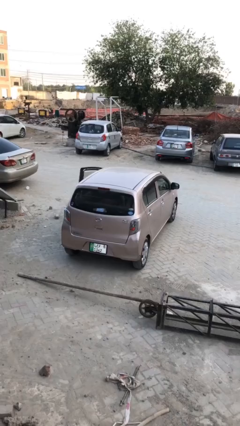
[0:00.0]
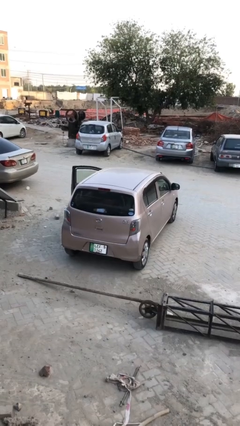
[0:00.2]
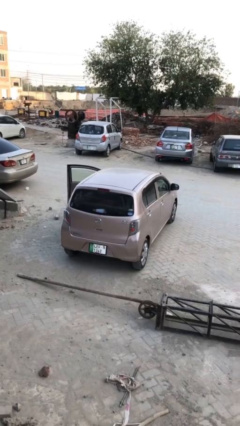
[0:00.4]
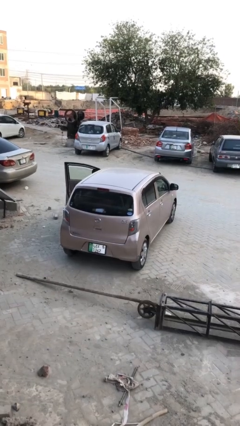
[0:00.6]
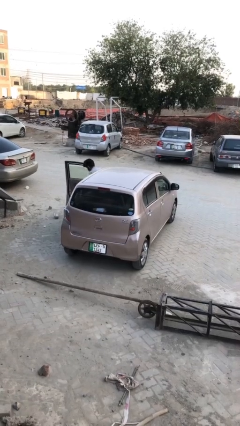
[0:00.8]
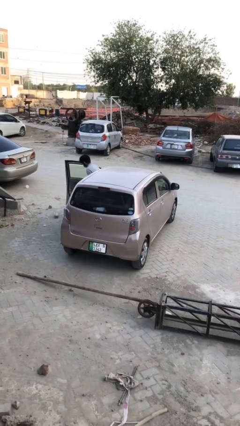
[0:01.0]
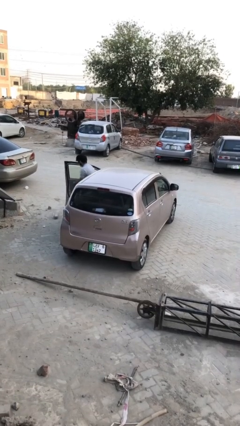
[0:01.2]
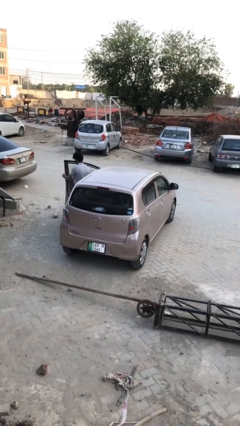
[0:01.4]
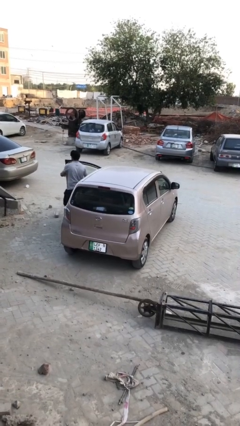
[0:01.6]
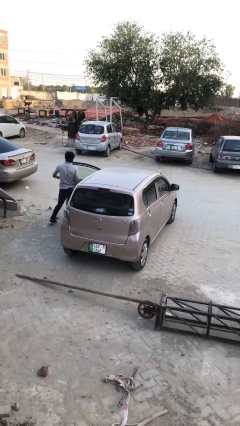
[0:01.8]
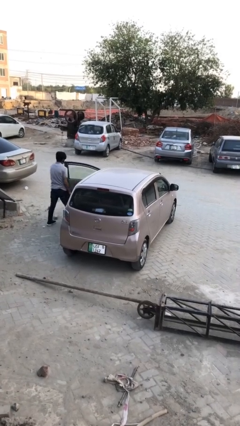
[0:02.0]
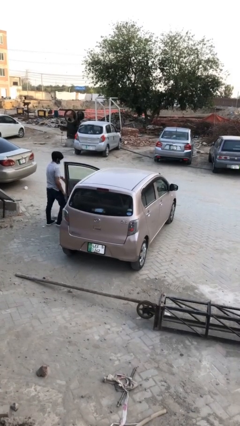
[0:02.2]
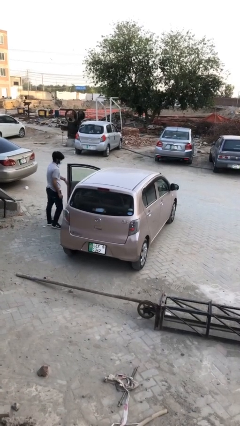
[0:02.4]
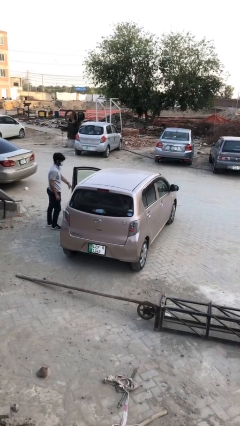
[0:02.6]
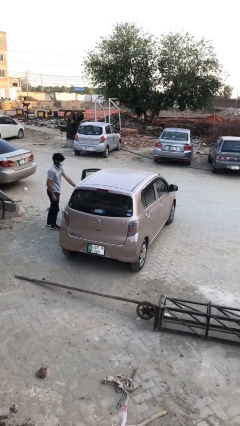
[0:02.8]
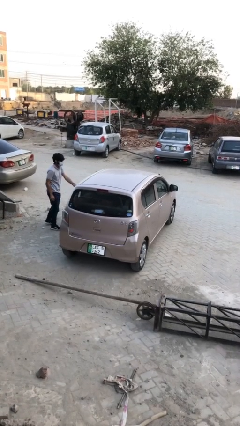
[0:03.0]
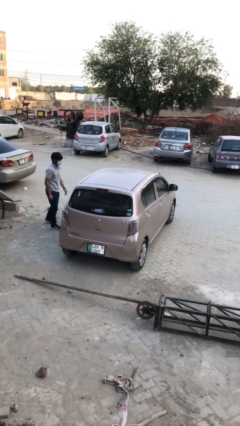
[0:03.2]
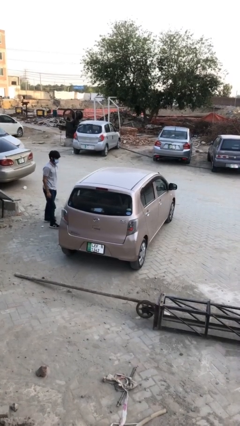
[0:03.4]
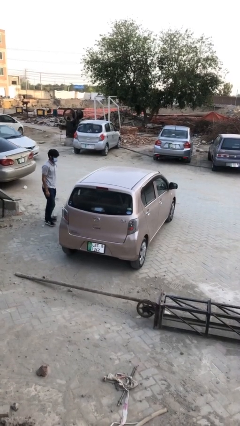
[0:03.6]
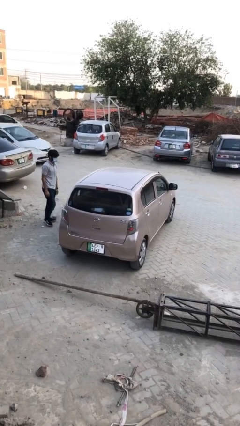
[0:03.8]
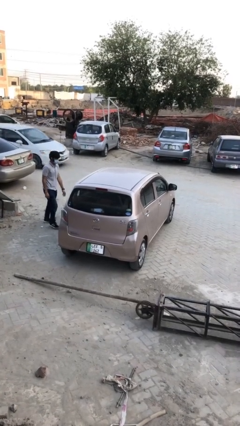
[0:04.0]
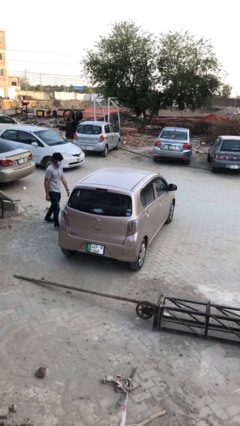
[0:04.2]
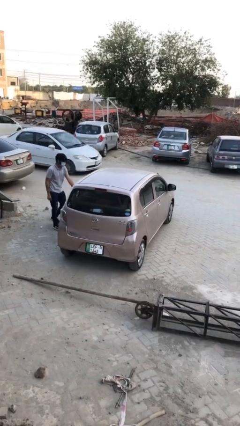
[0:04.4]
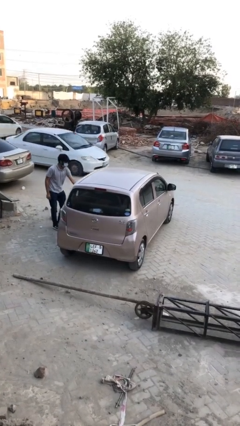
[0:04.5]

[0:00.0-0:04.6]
car drops off person

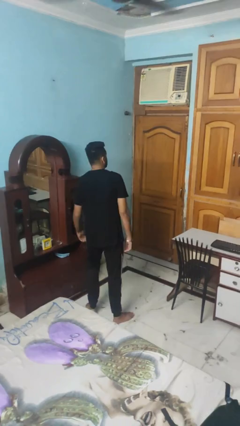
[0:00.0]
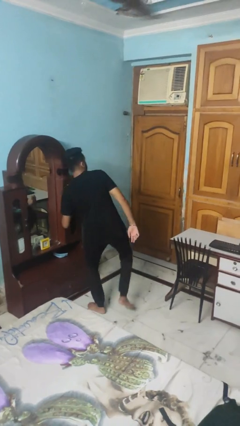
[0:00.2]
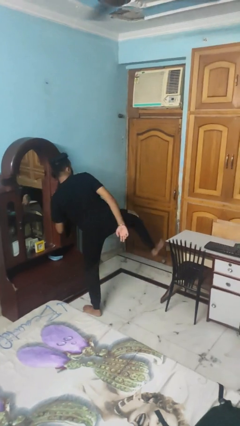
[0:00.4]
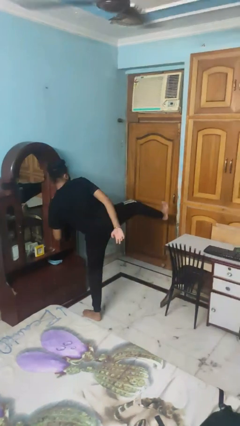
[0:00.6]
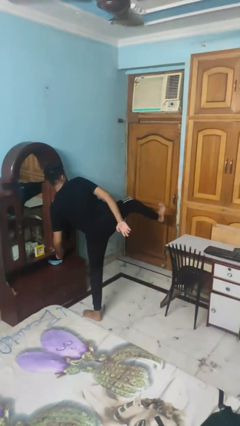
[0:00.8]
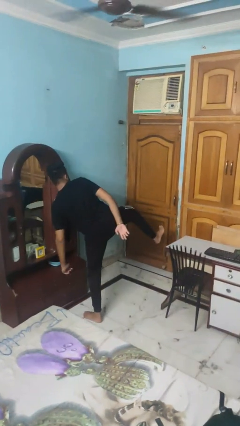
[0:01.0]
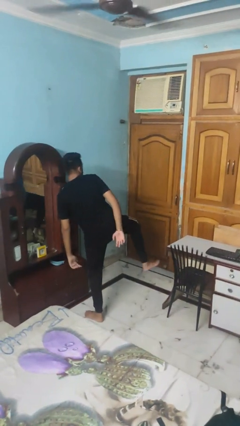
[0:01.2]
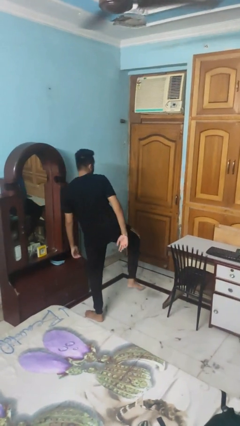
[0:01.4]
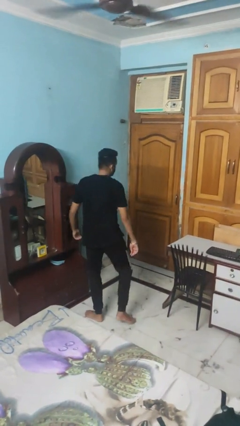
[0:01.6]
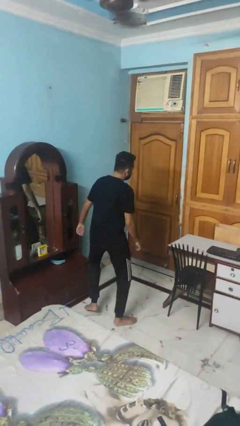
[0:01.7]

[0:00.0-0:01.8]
person karate kicks

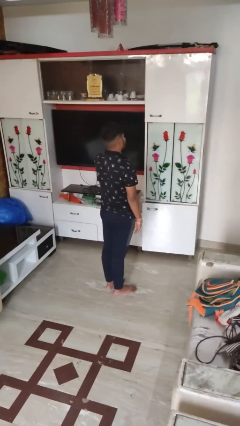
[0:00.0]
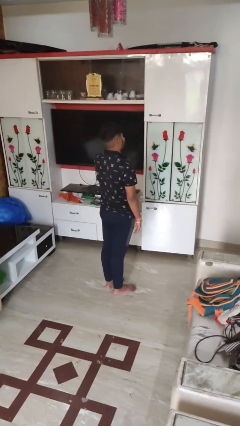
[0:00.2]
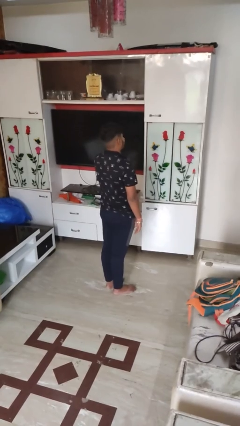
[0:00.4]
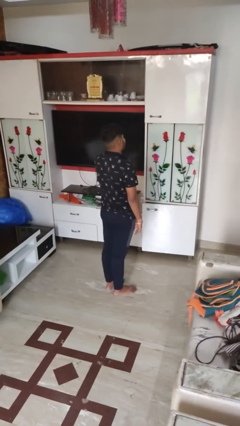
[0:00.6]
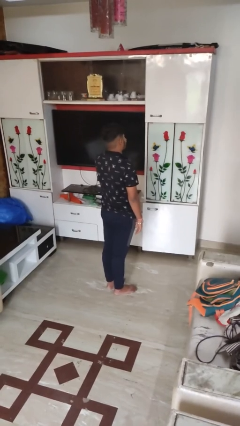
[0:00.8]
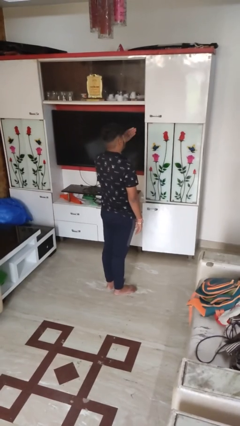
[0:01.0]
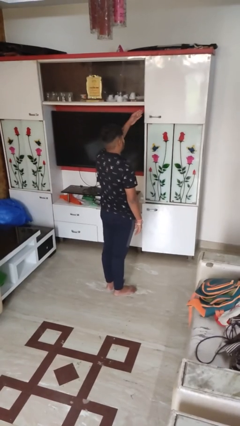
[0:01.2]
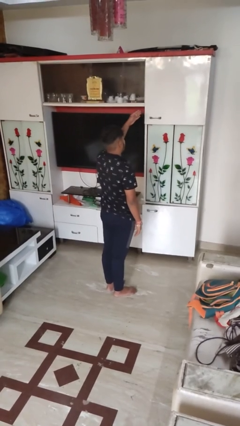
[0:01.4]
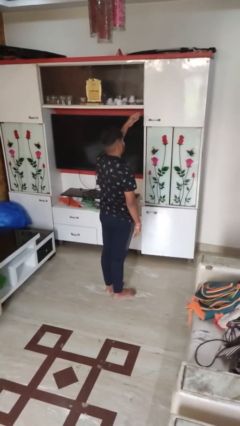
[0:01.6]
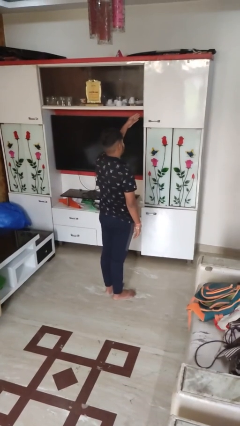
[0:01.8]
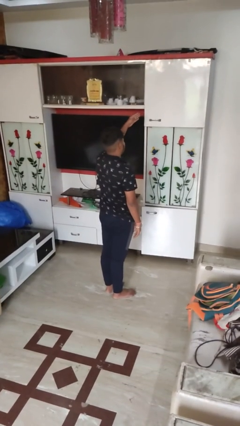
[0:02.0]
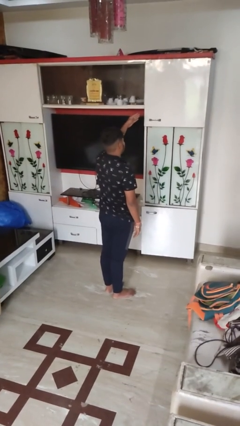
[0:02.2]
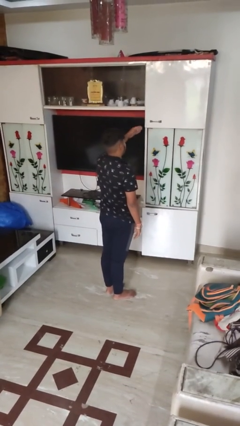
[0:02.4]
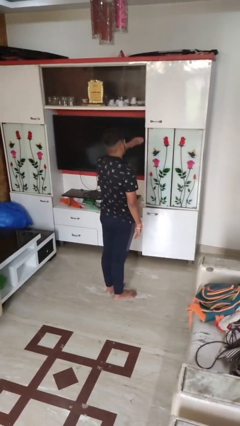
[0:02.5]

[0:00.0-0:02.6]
person gestures blow kiss

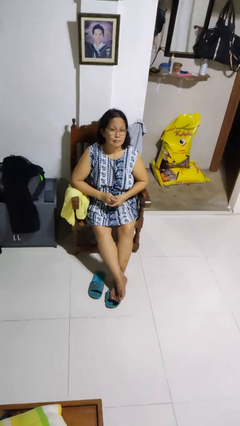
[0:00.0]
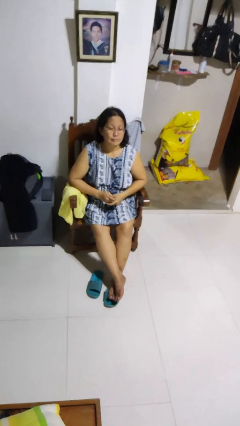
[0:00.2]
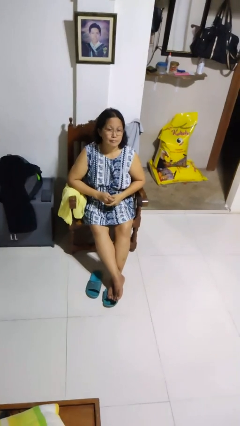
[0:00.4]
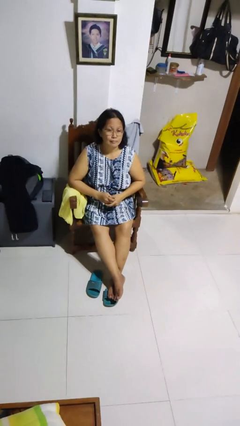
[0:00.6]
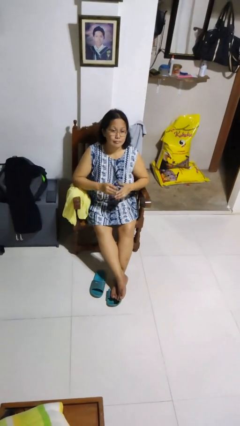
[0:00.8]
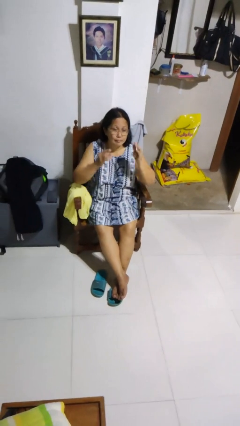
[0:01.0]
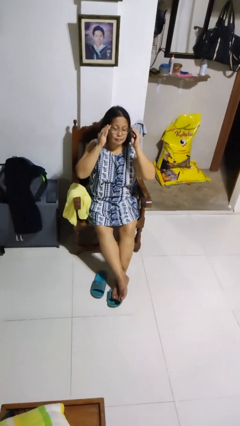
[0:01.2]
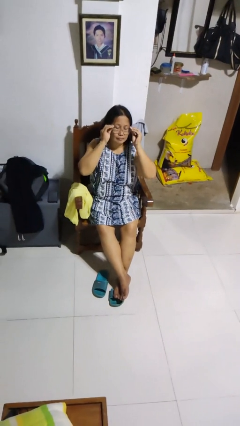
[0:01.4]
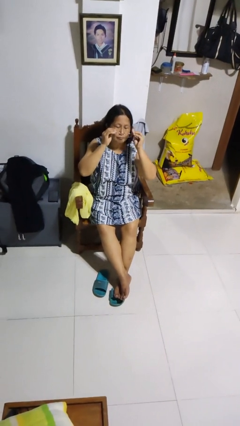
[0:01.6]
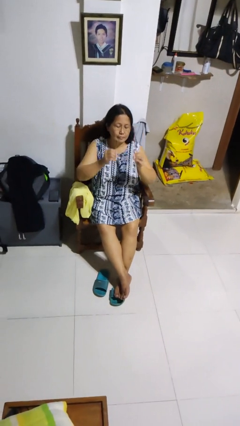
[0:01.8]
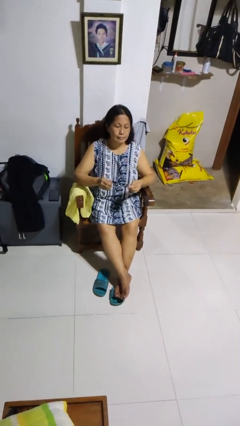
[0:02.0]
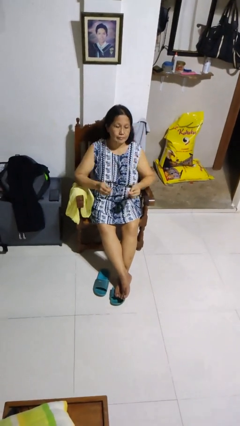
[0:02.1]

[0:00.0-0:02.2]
person takes off glasses

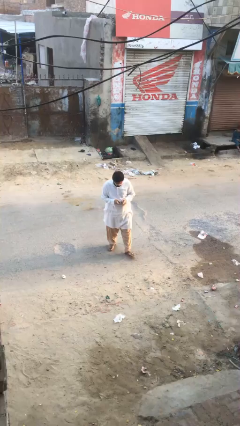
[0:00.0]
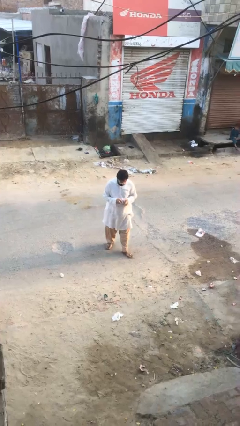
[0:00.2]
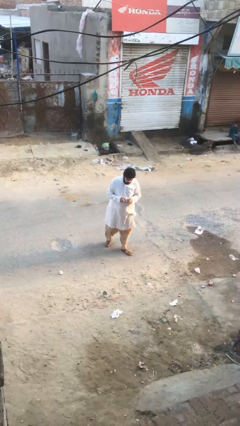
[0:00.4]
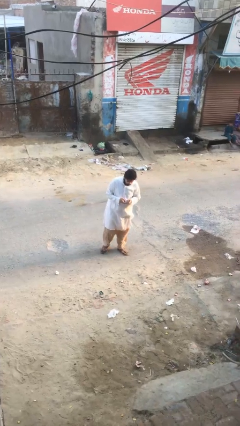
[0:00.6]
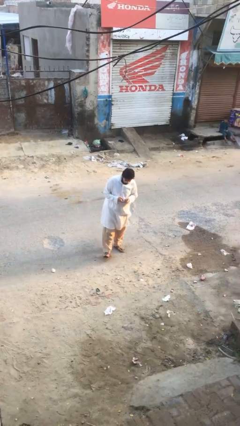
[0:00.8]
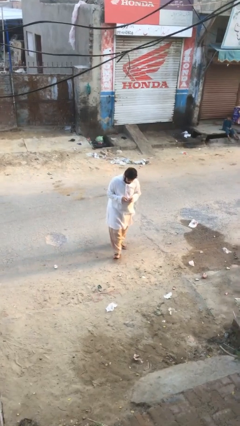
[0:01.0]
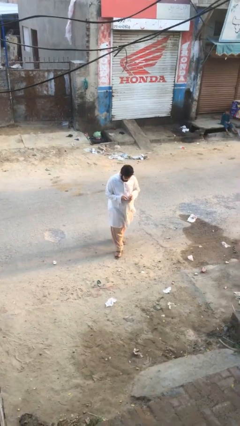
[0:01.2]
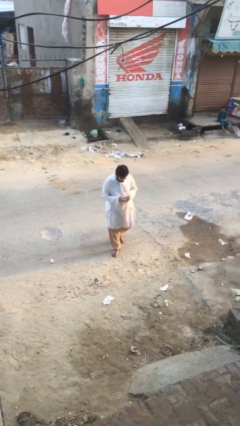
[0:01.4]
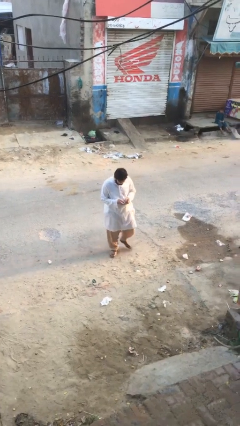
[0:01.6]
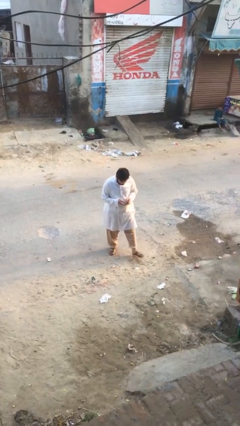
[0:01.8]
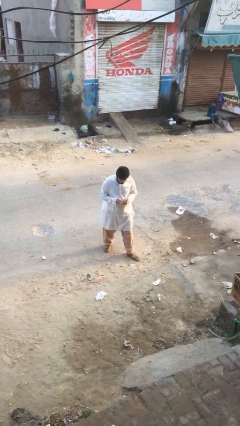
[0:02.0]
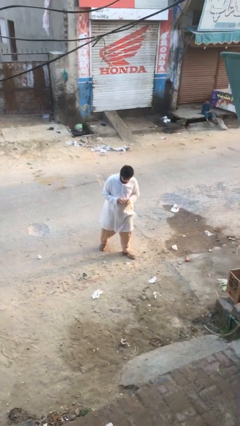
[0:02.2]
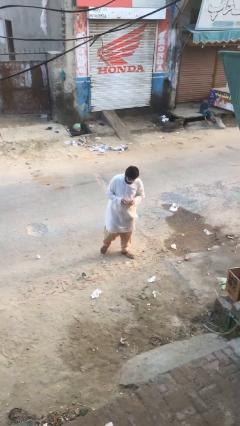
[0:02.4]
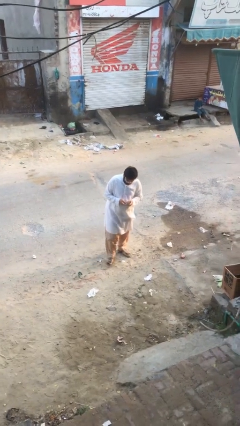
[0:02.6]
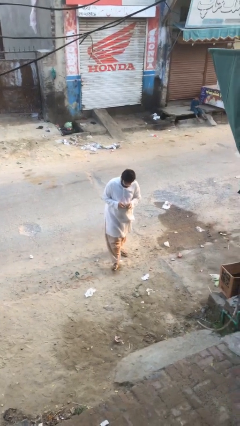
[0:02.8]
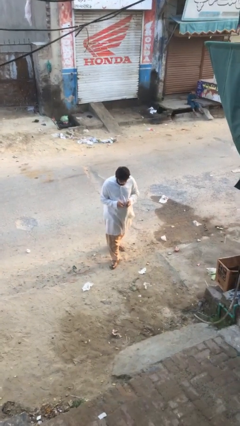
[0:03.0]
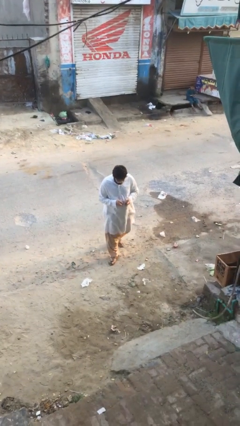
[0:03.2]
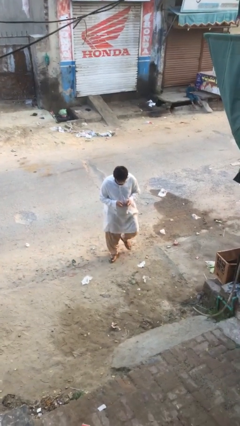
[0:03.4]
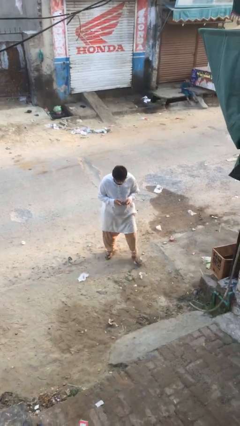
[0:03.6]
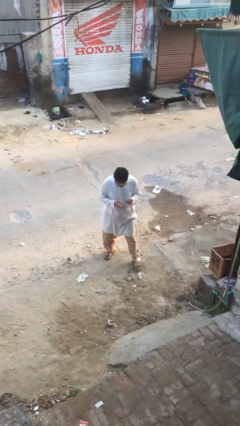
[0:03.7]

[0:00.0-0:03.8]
person texts on phone

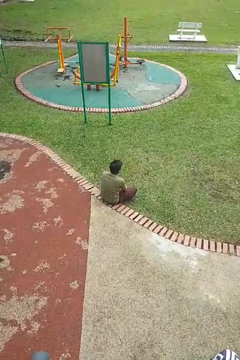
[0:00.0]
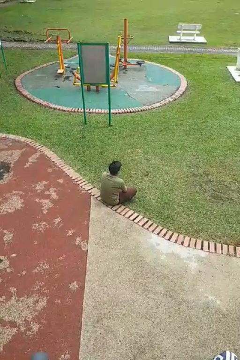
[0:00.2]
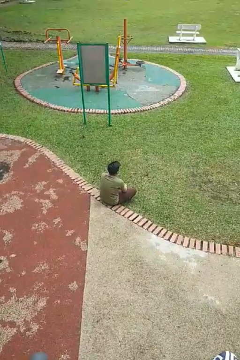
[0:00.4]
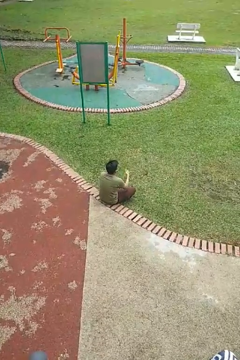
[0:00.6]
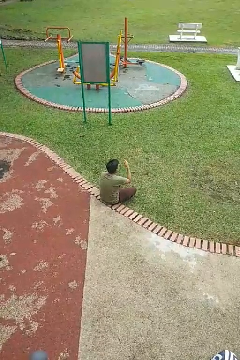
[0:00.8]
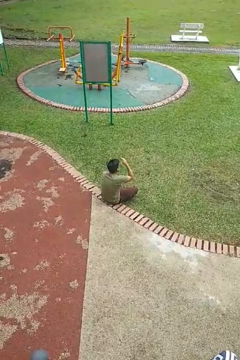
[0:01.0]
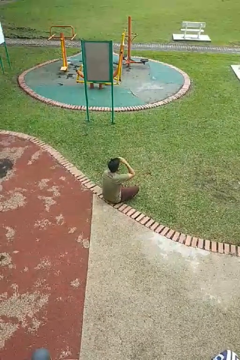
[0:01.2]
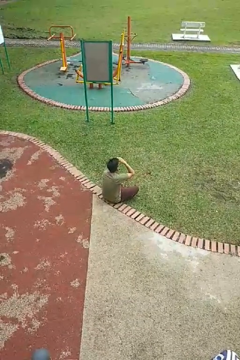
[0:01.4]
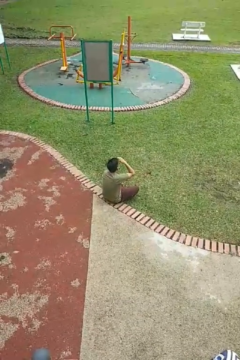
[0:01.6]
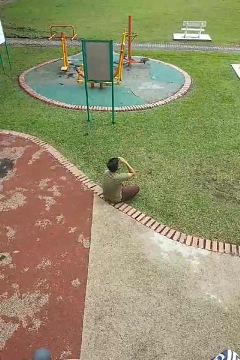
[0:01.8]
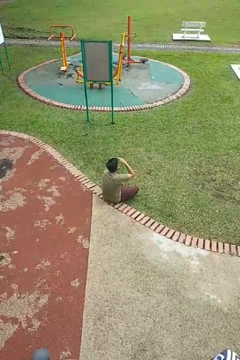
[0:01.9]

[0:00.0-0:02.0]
person shades eyes

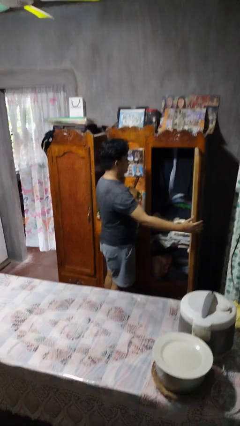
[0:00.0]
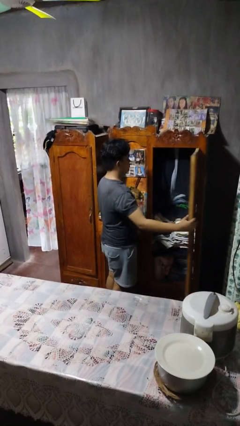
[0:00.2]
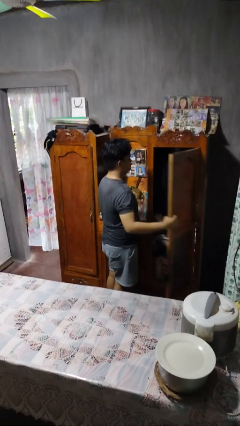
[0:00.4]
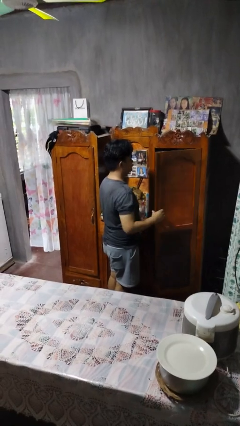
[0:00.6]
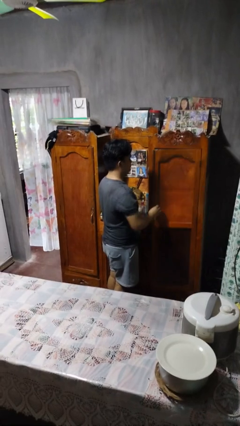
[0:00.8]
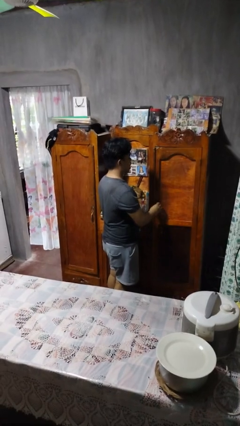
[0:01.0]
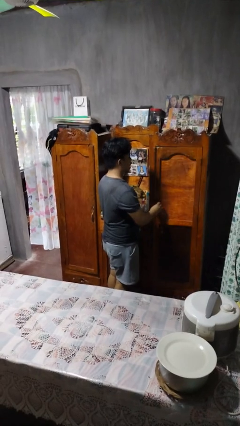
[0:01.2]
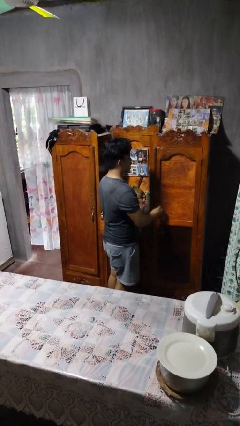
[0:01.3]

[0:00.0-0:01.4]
person closes closet door
